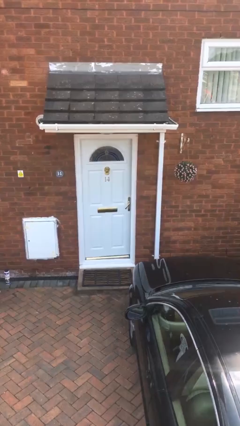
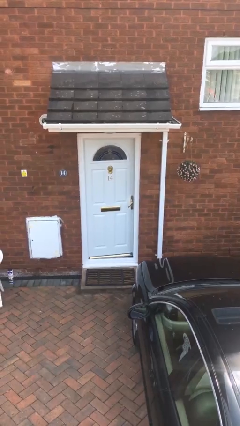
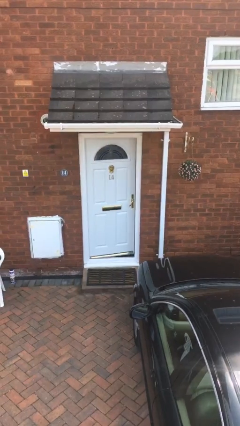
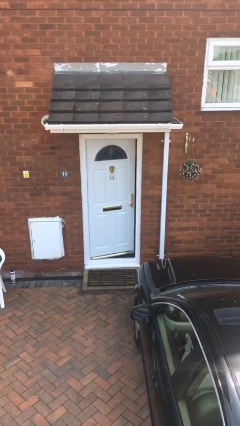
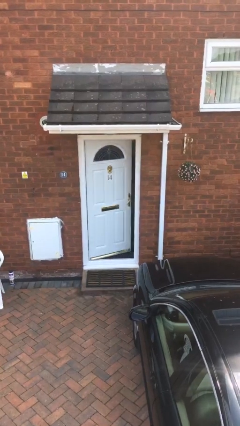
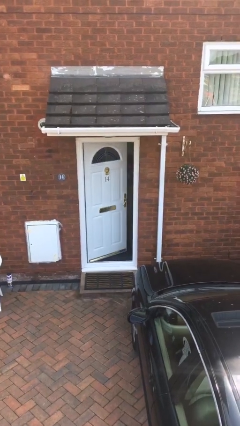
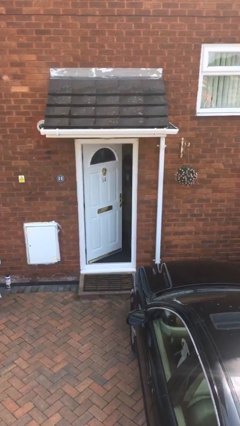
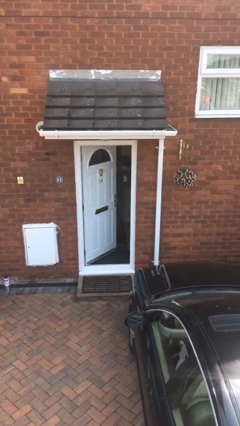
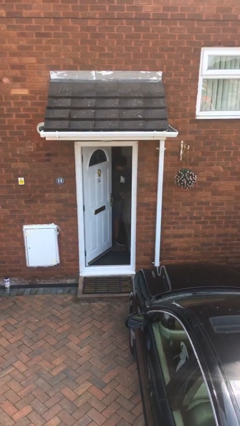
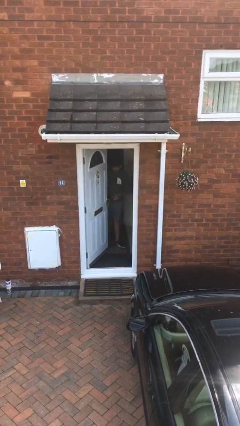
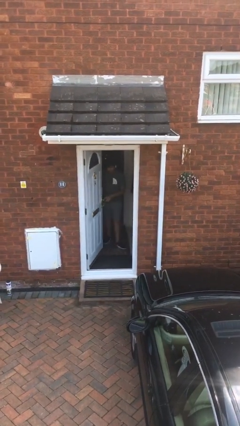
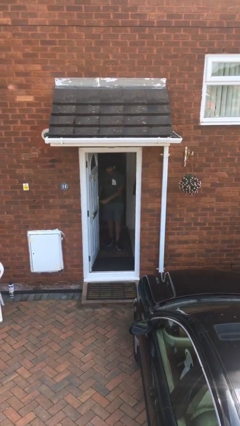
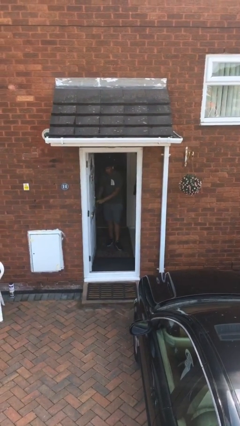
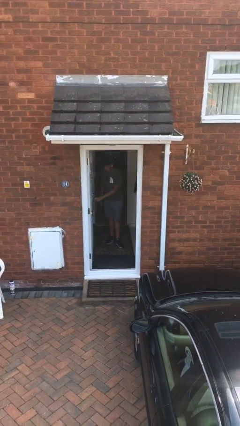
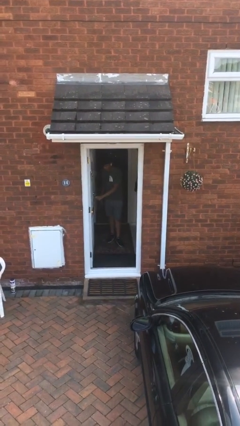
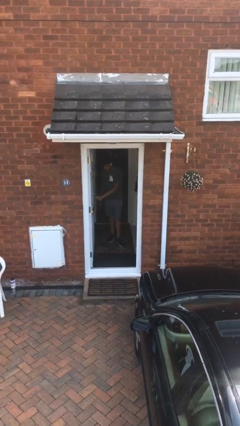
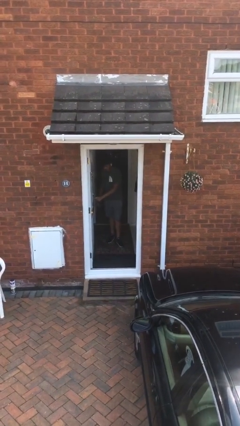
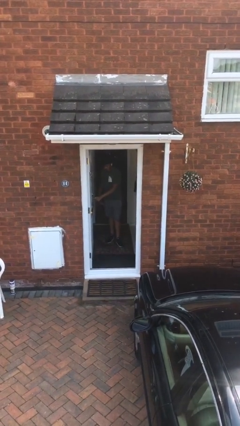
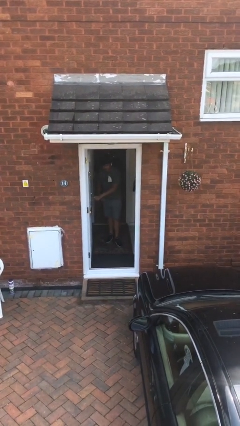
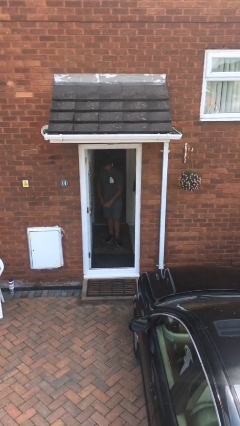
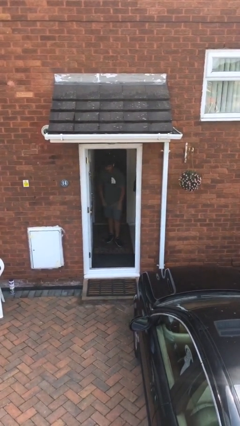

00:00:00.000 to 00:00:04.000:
person opens facility door

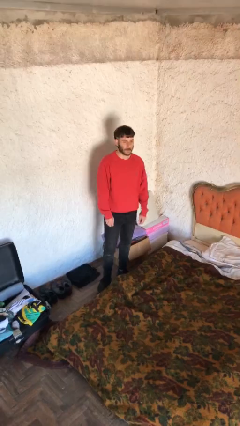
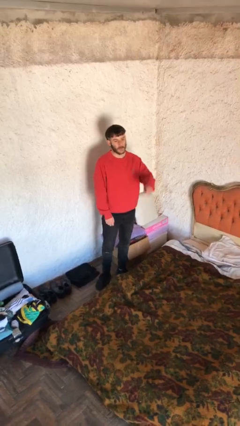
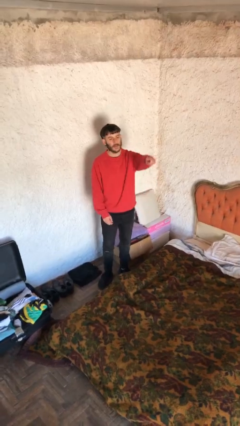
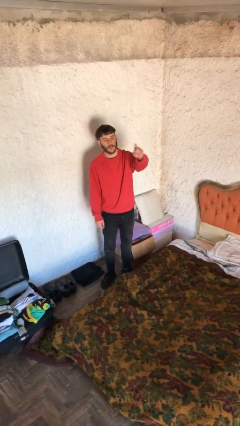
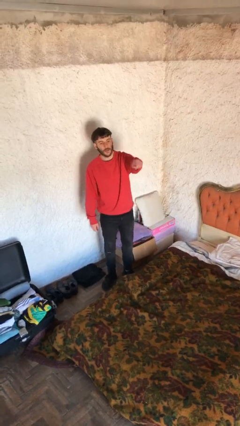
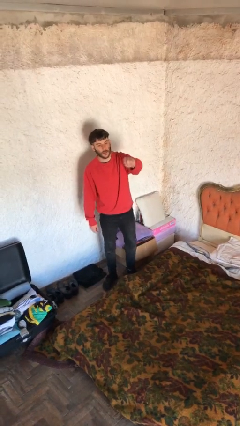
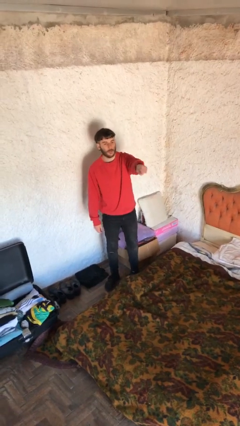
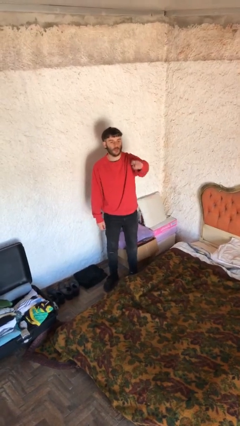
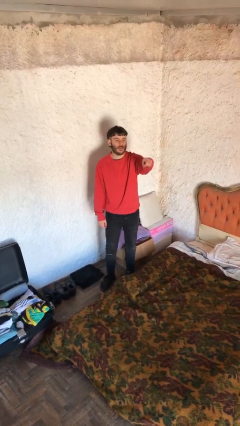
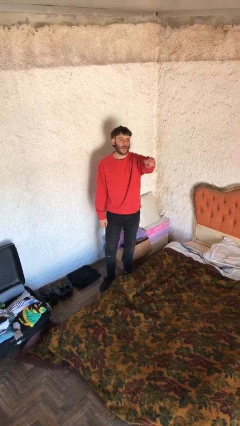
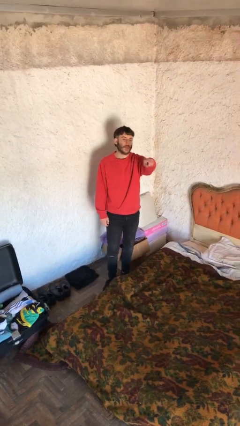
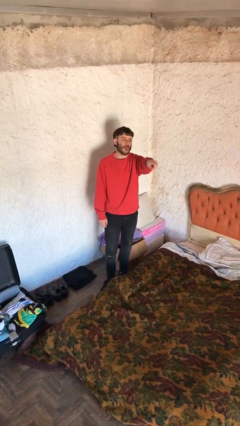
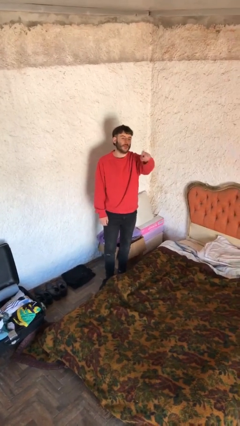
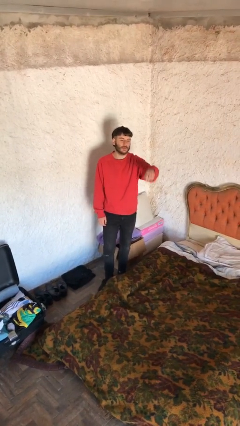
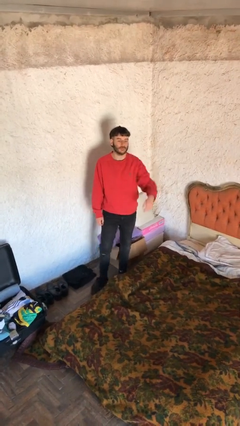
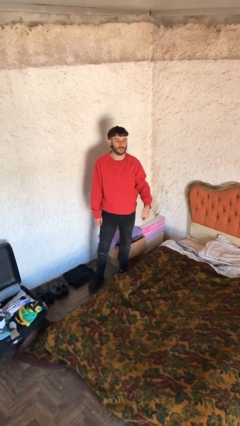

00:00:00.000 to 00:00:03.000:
person points at person

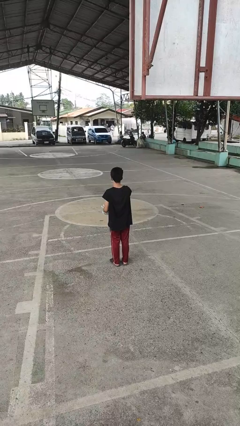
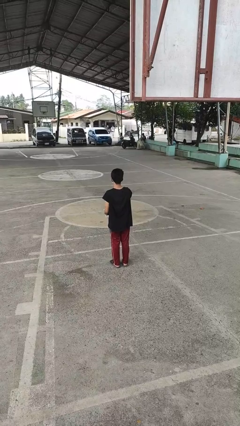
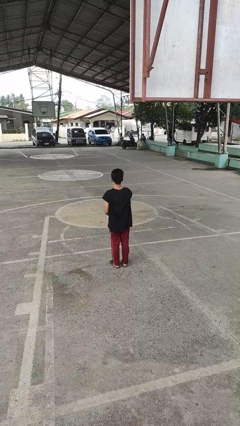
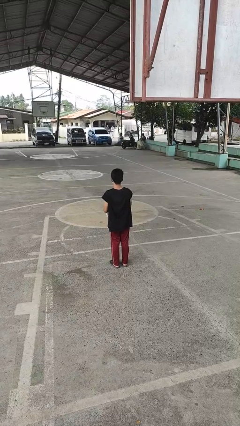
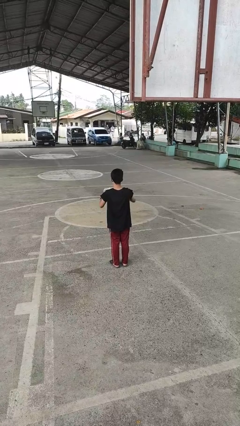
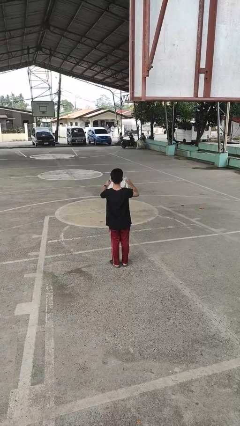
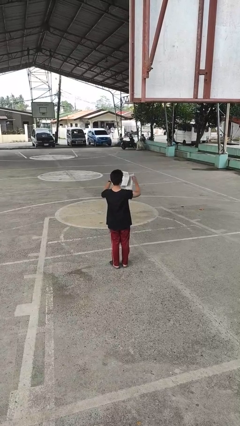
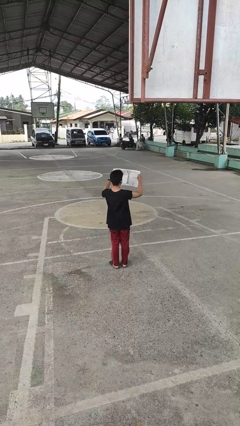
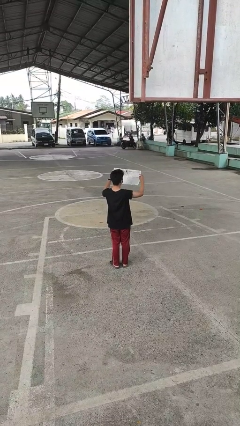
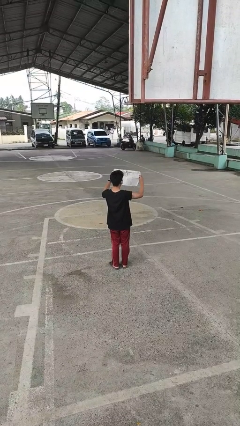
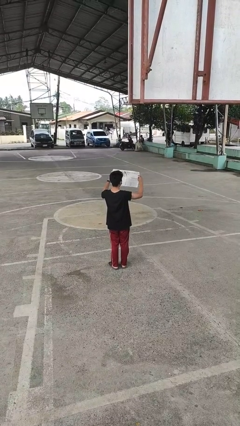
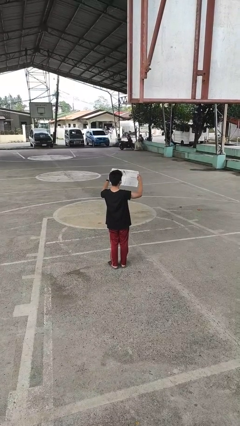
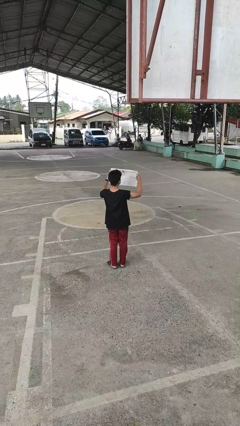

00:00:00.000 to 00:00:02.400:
person reads newspaper

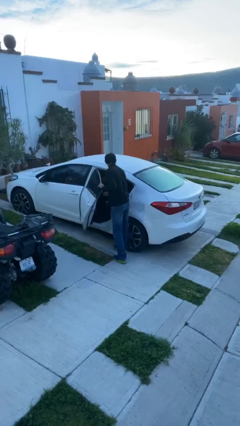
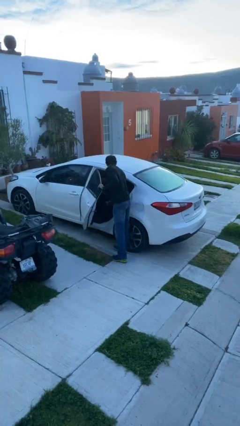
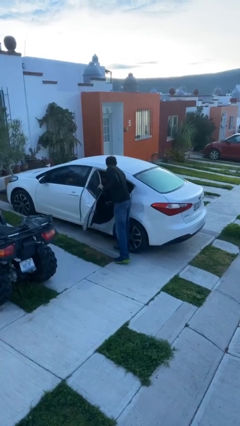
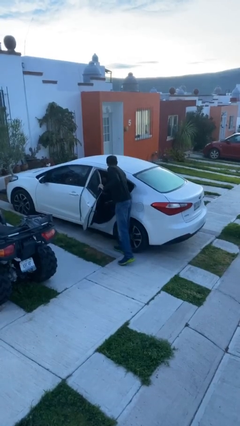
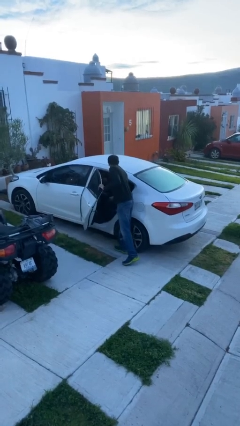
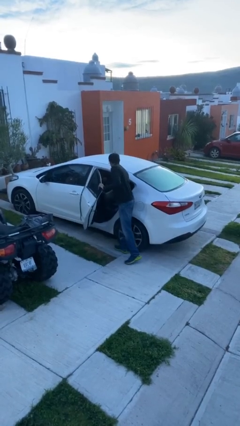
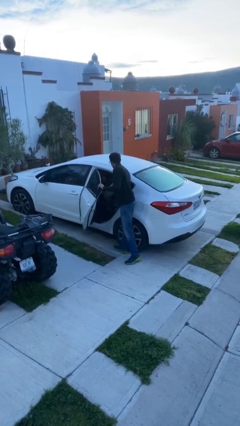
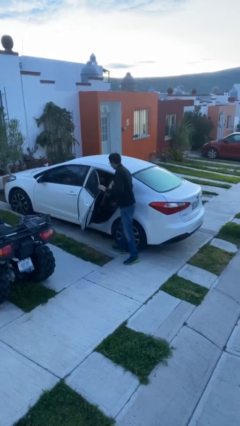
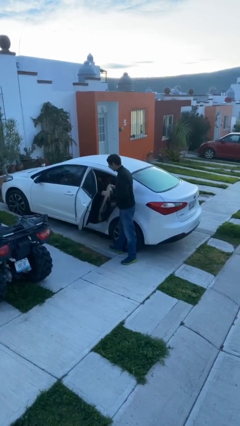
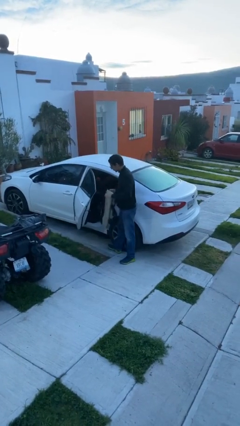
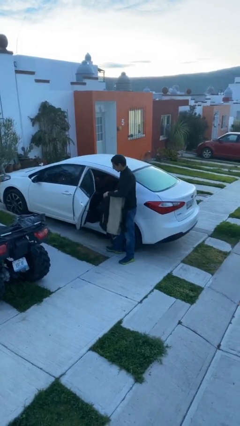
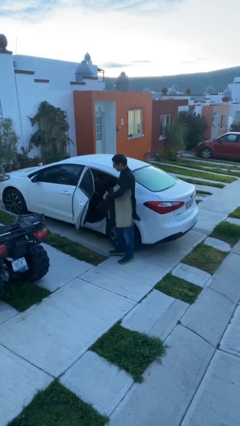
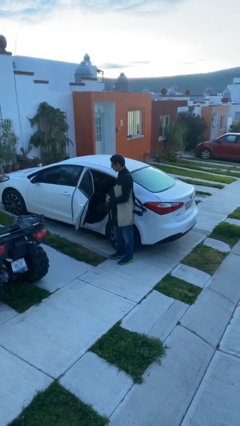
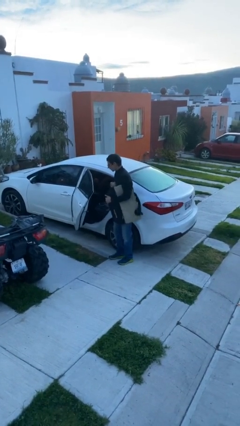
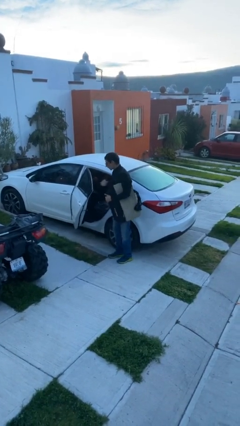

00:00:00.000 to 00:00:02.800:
person unloads car

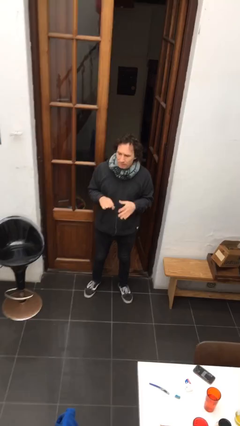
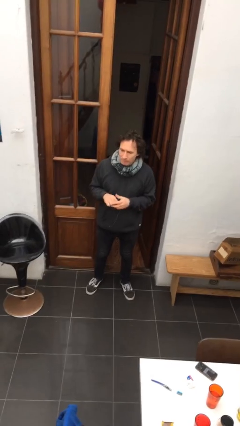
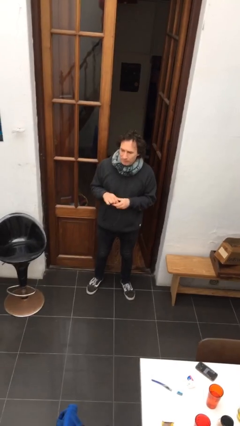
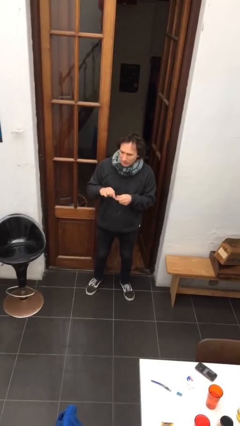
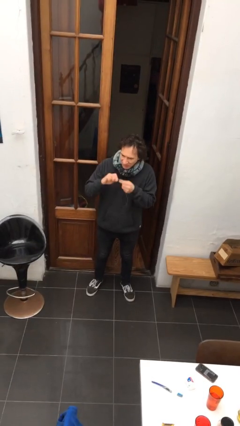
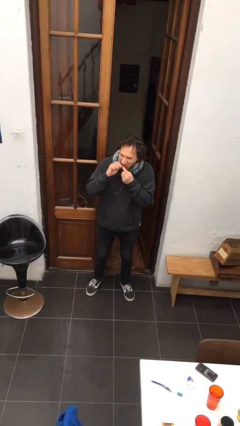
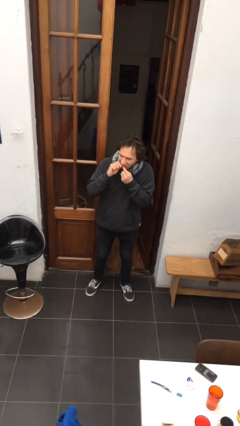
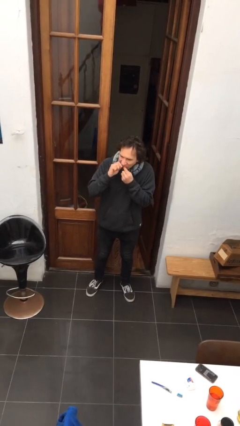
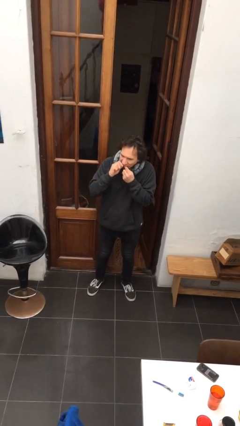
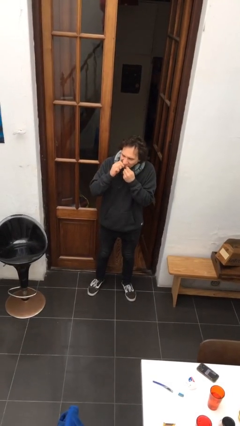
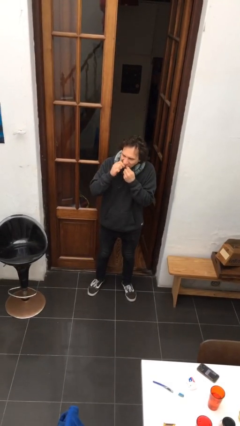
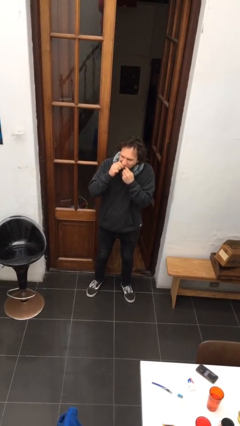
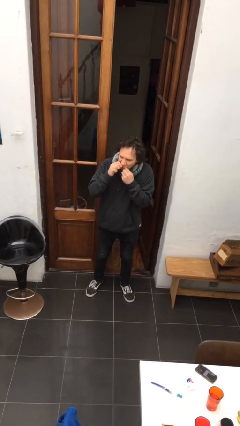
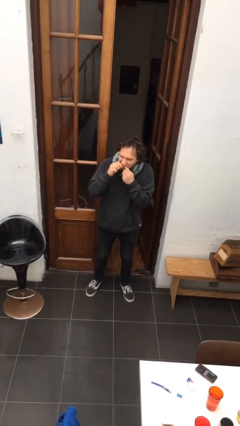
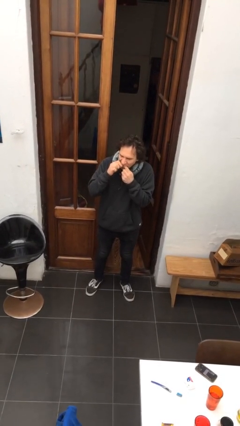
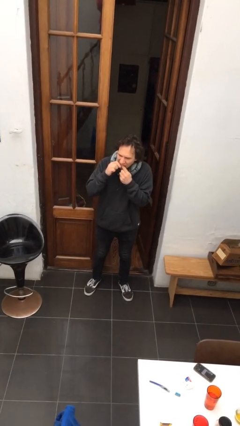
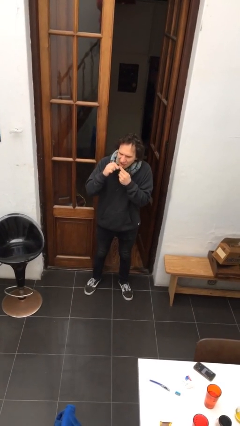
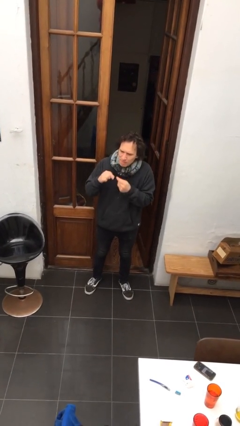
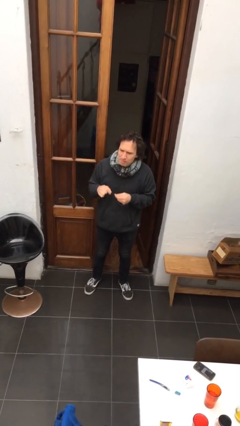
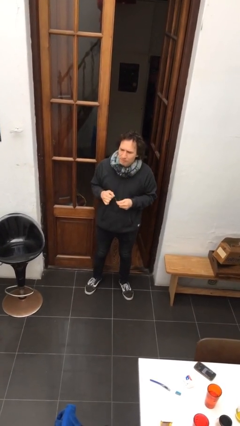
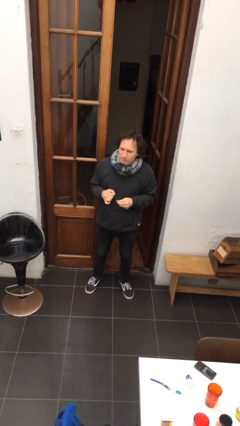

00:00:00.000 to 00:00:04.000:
person flosses

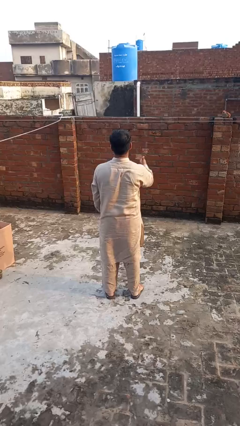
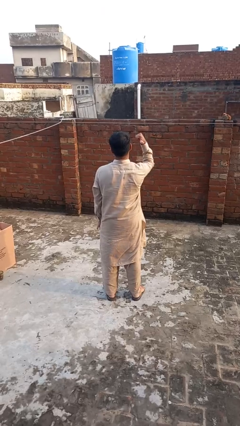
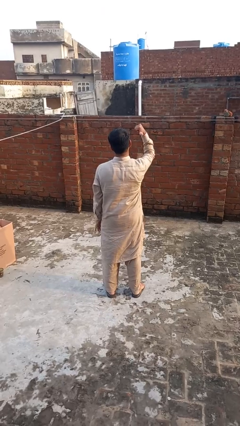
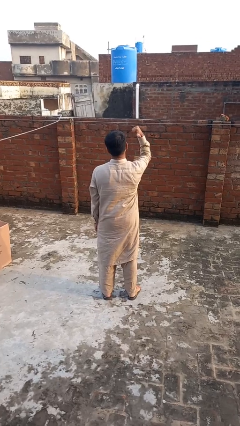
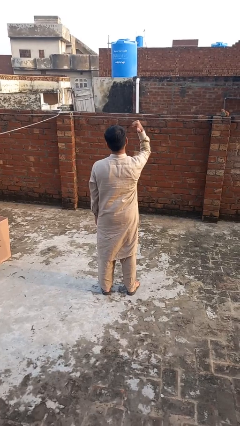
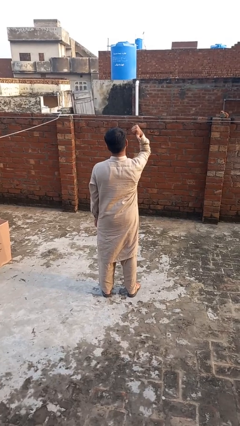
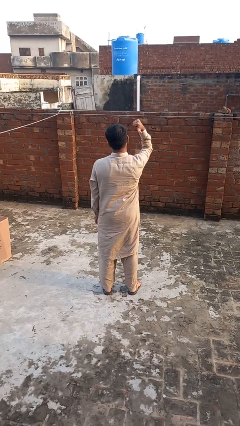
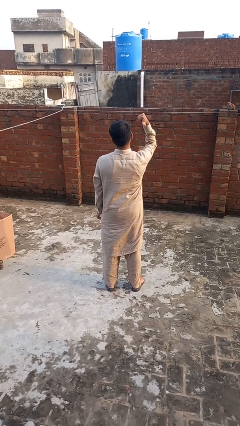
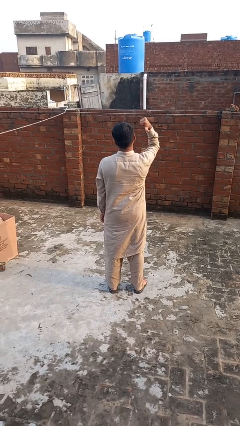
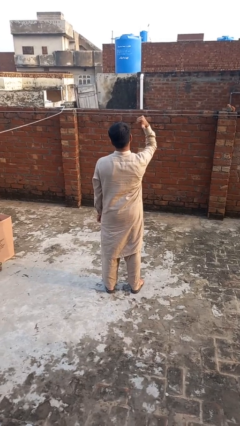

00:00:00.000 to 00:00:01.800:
person gestures behind me
